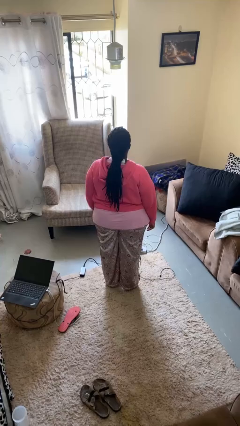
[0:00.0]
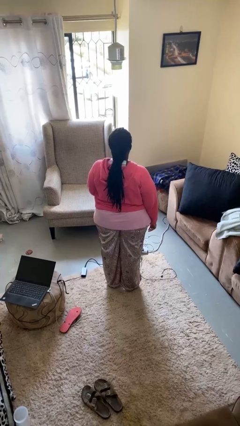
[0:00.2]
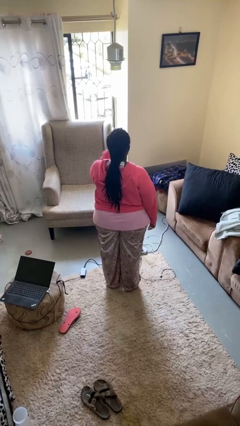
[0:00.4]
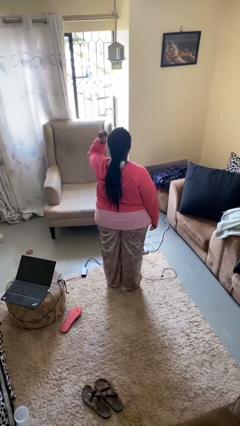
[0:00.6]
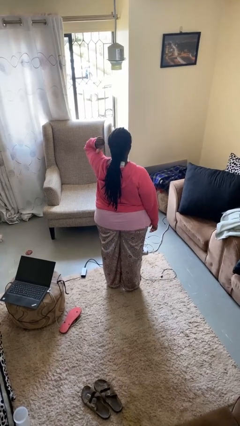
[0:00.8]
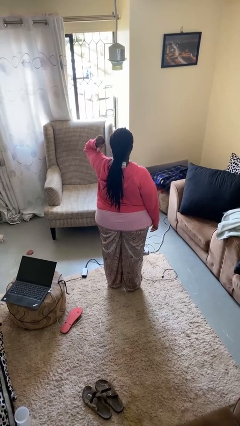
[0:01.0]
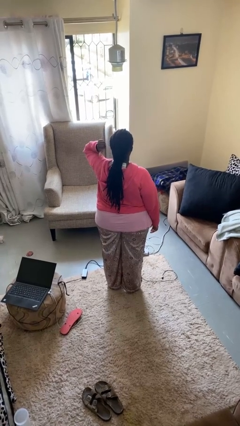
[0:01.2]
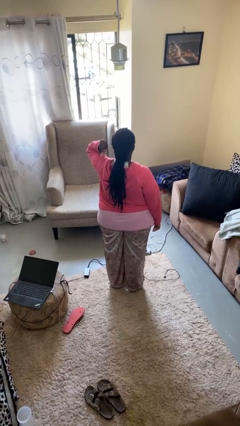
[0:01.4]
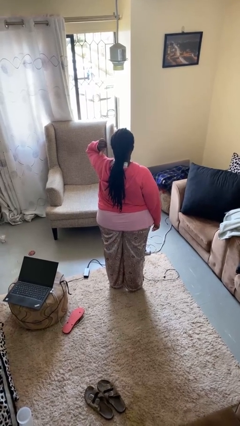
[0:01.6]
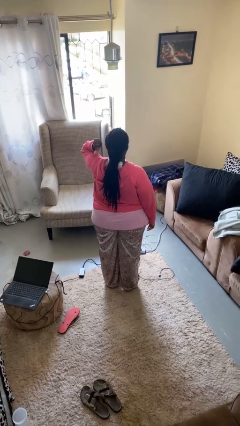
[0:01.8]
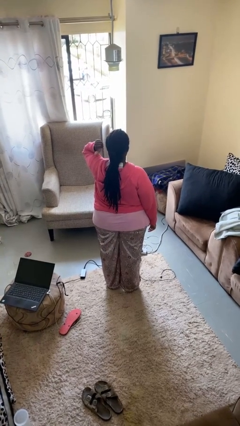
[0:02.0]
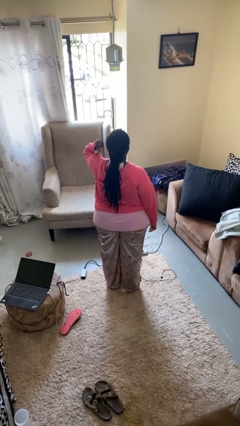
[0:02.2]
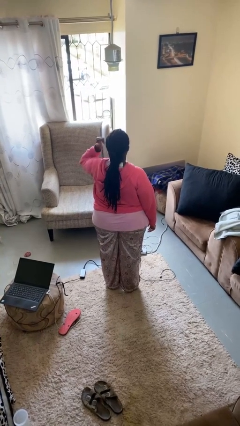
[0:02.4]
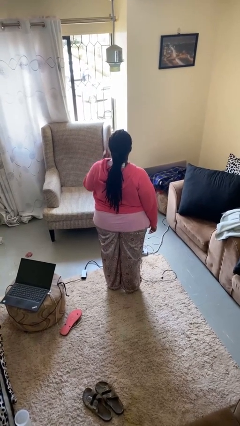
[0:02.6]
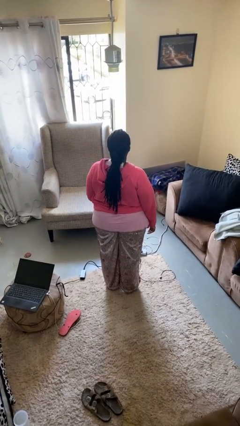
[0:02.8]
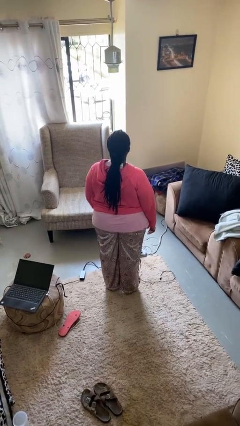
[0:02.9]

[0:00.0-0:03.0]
person gestures behind me

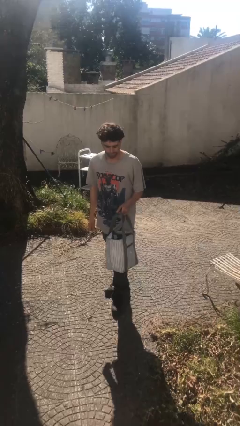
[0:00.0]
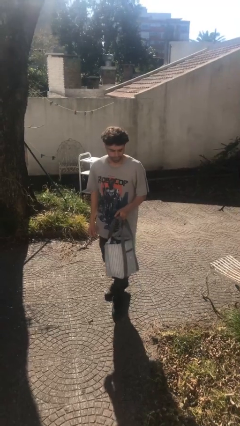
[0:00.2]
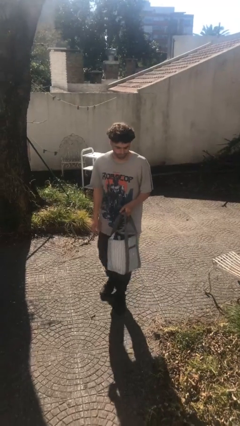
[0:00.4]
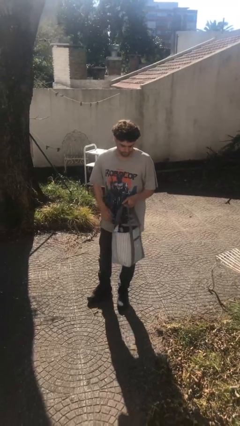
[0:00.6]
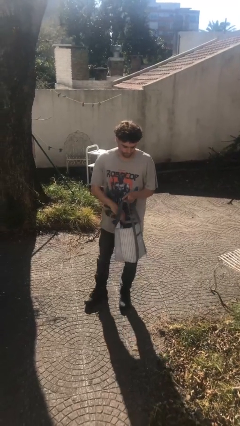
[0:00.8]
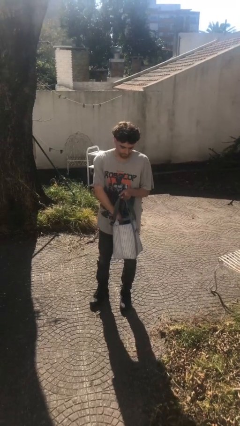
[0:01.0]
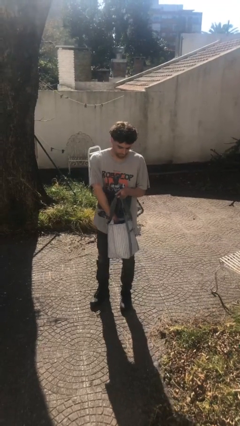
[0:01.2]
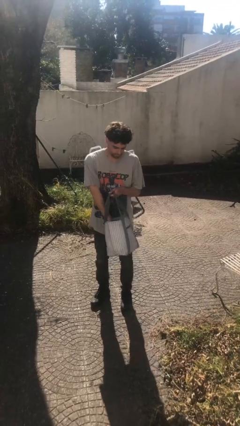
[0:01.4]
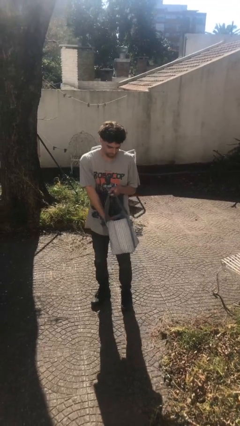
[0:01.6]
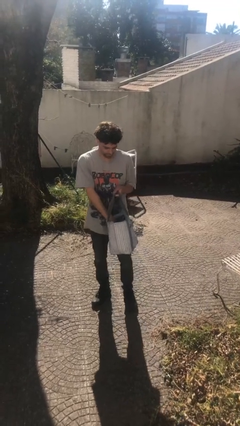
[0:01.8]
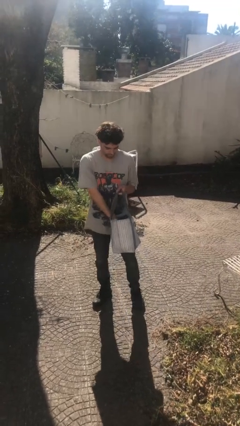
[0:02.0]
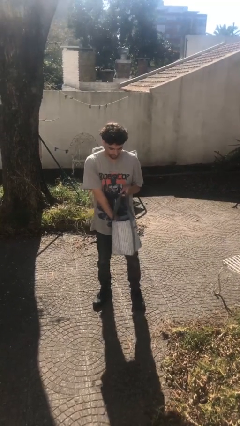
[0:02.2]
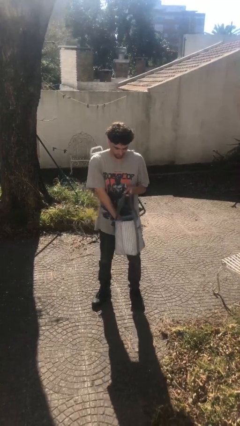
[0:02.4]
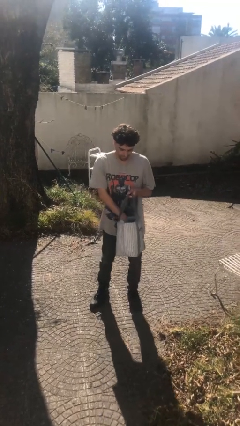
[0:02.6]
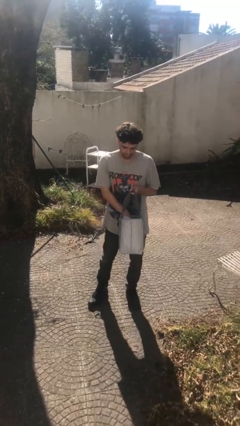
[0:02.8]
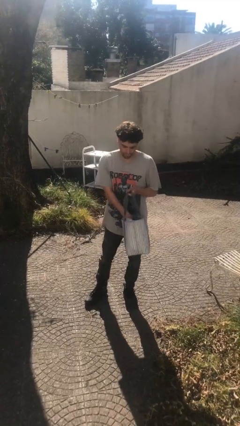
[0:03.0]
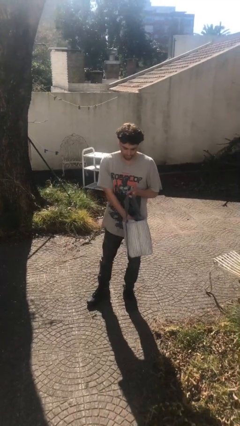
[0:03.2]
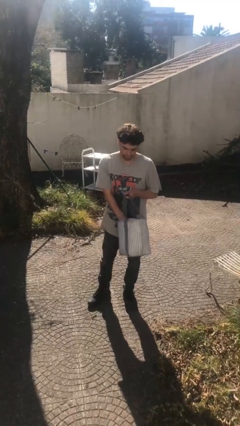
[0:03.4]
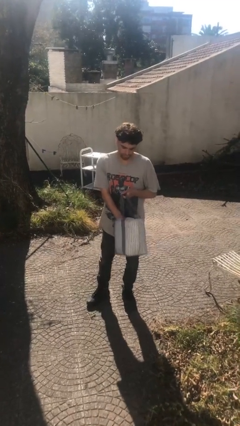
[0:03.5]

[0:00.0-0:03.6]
person searches in purse

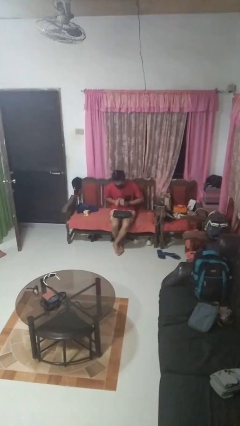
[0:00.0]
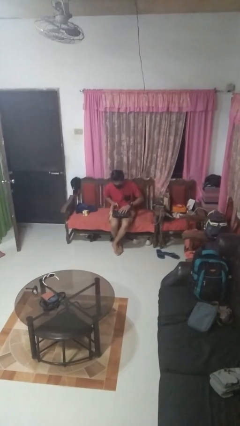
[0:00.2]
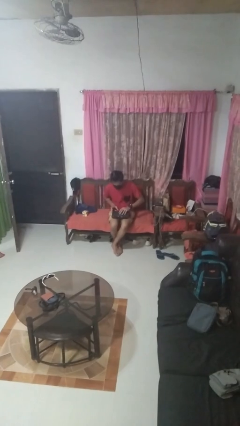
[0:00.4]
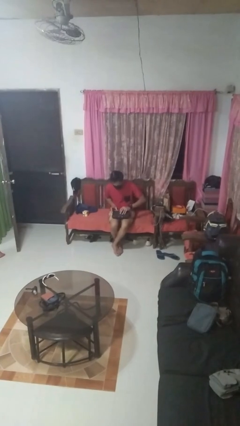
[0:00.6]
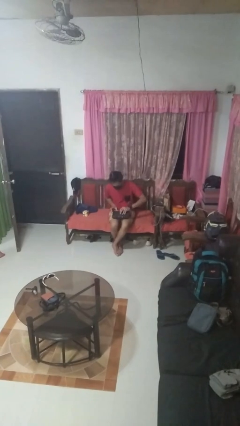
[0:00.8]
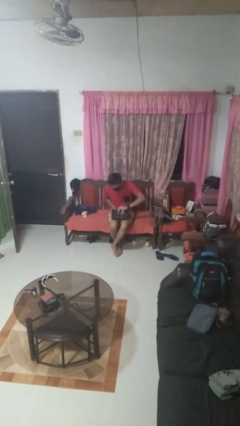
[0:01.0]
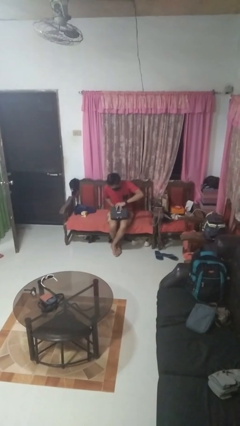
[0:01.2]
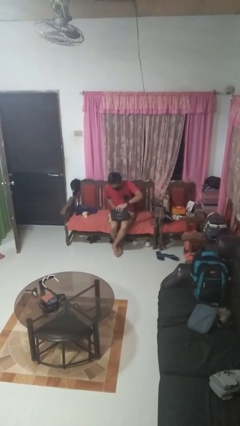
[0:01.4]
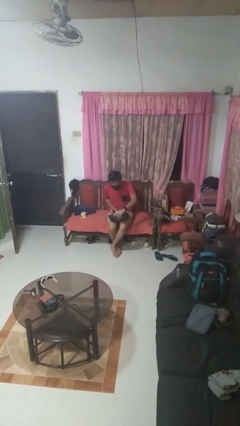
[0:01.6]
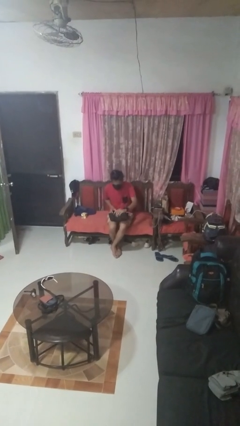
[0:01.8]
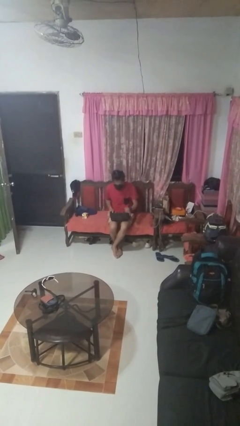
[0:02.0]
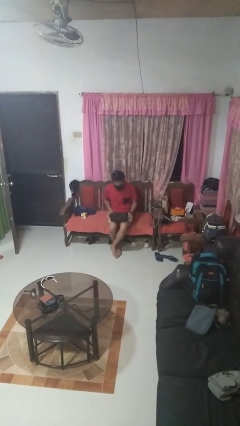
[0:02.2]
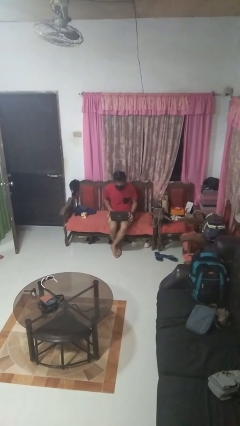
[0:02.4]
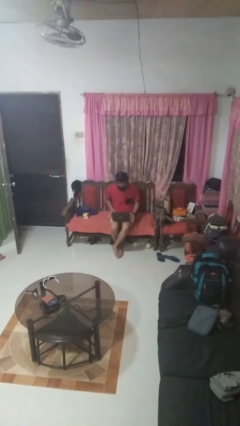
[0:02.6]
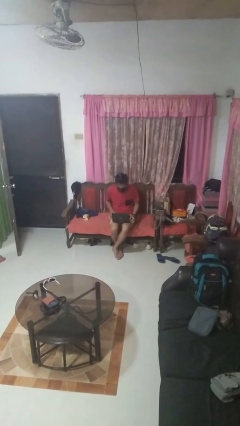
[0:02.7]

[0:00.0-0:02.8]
person opens laptop

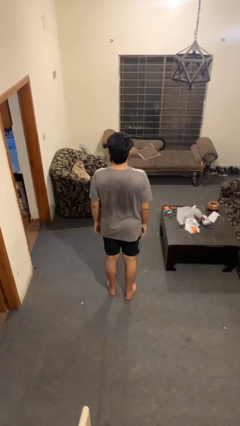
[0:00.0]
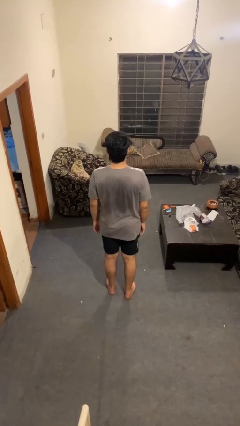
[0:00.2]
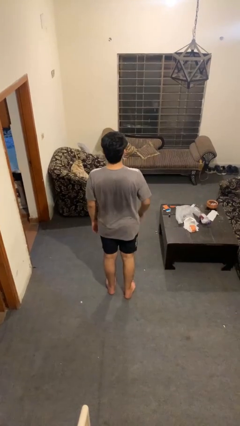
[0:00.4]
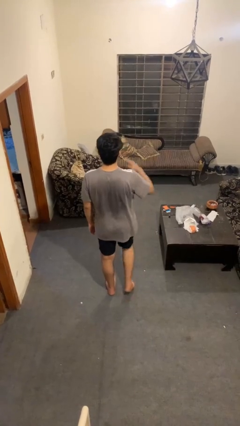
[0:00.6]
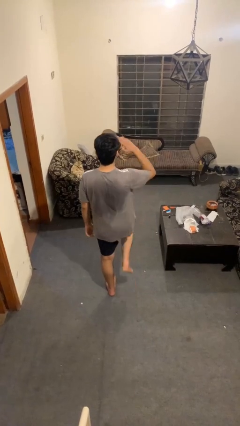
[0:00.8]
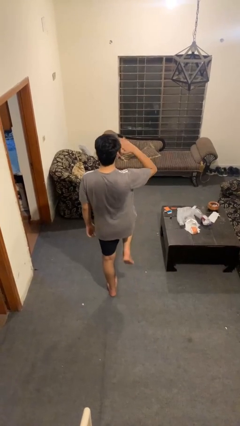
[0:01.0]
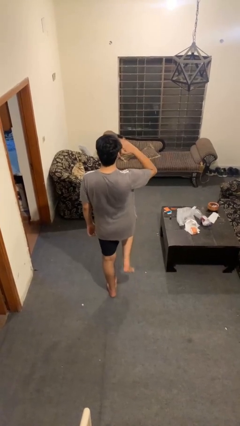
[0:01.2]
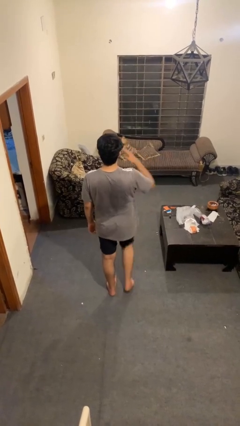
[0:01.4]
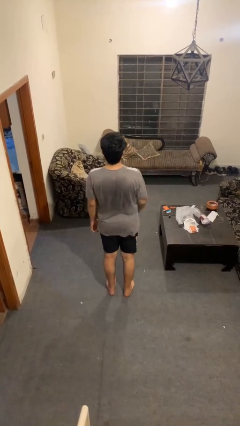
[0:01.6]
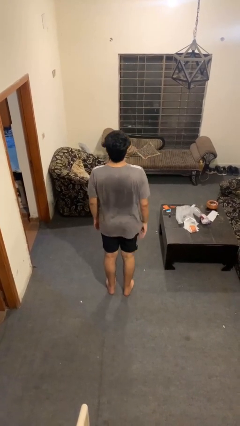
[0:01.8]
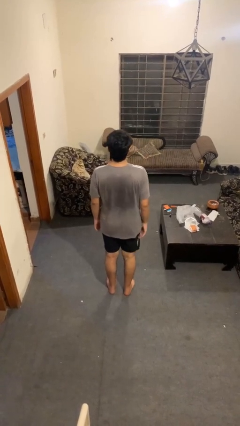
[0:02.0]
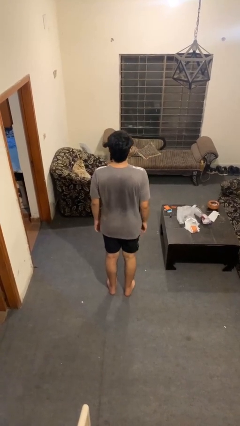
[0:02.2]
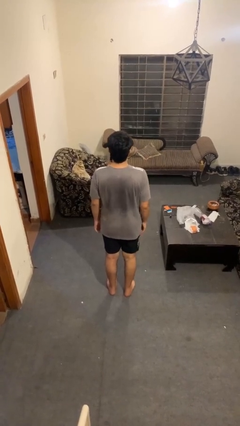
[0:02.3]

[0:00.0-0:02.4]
person salutes

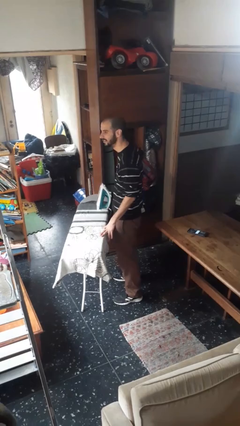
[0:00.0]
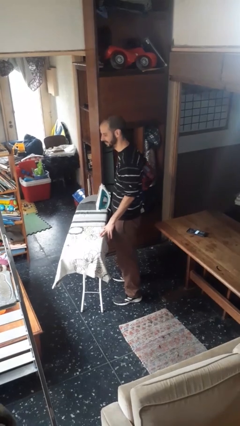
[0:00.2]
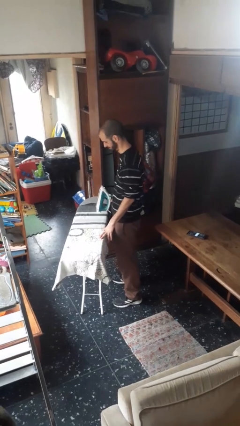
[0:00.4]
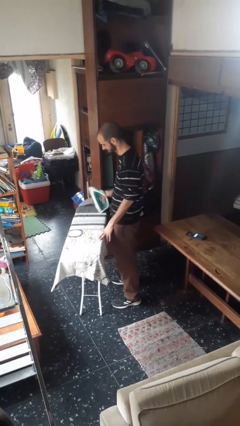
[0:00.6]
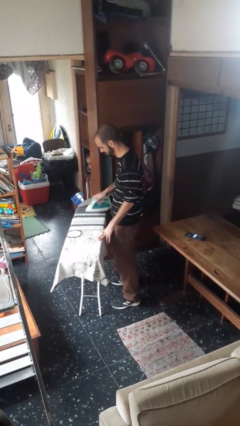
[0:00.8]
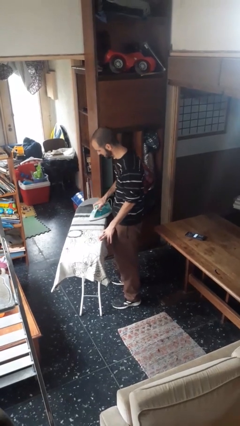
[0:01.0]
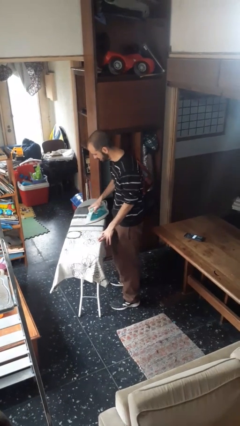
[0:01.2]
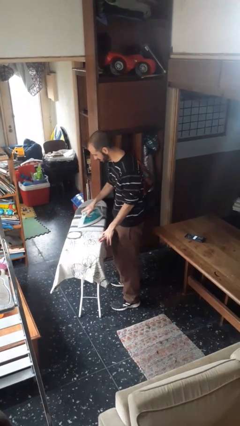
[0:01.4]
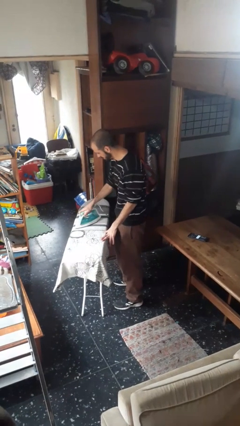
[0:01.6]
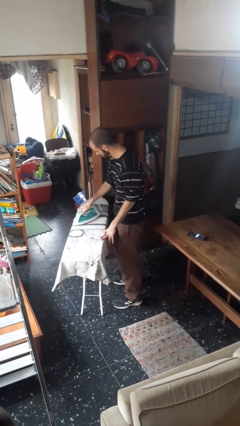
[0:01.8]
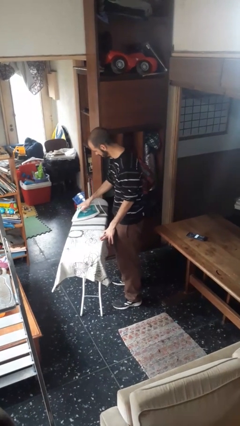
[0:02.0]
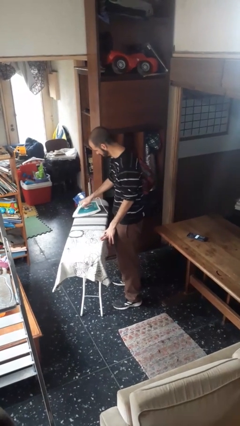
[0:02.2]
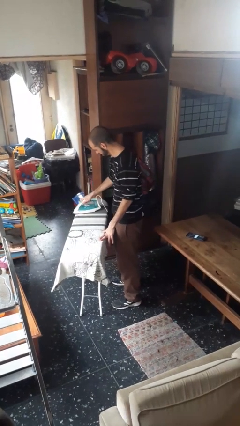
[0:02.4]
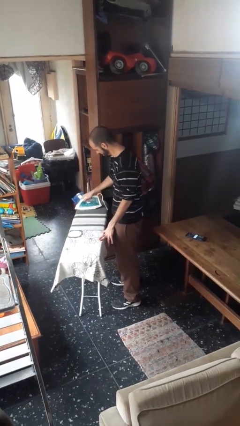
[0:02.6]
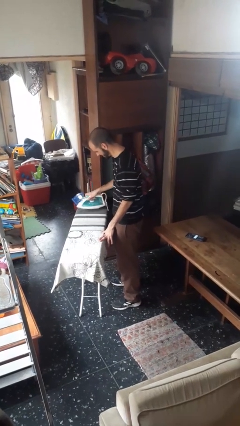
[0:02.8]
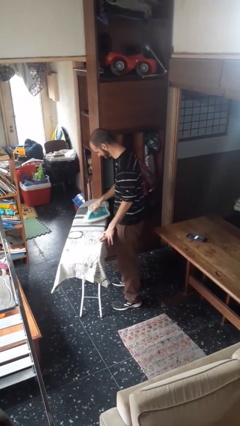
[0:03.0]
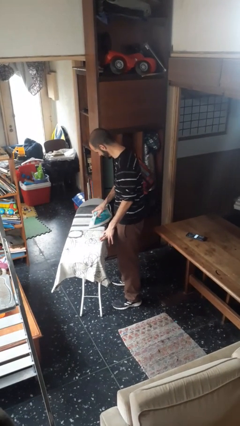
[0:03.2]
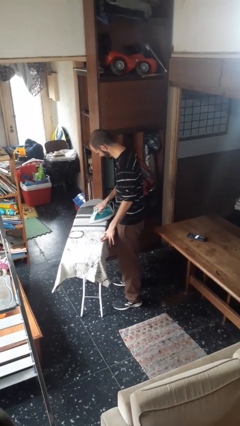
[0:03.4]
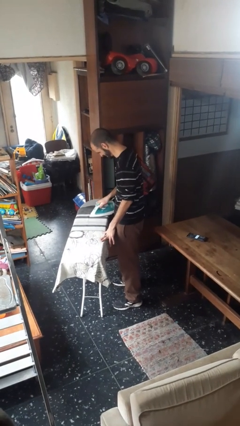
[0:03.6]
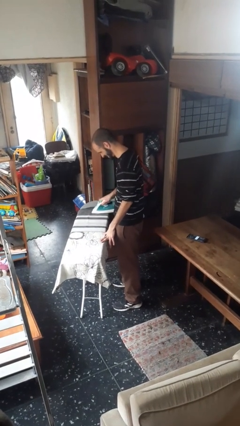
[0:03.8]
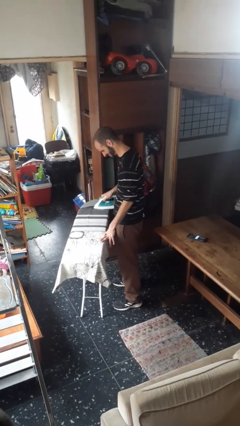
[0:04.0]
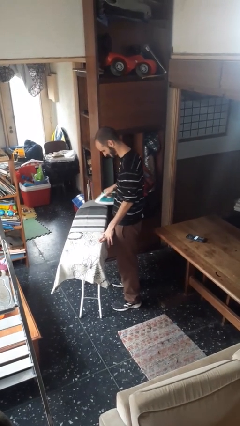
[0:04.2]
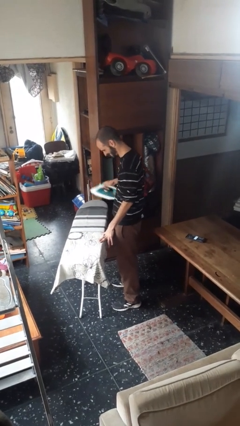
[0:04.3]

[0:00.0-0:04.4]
person irons clothes

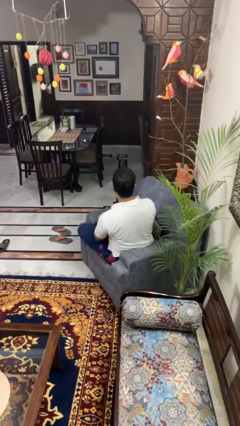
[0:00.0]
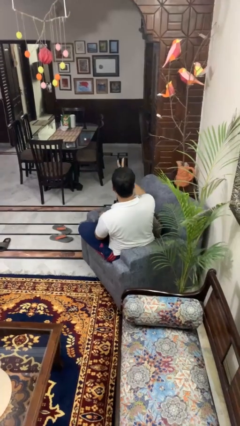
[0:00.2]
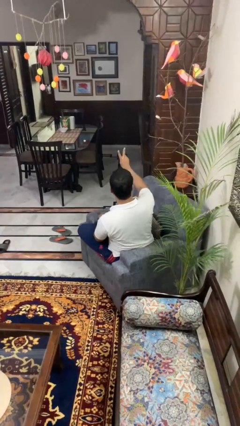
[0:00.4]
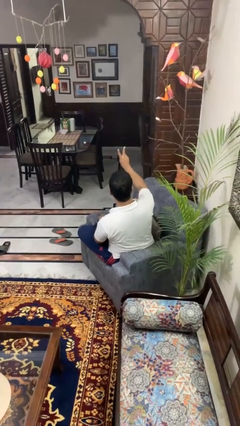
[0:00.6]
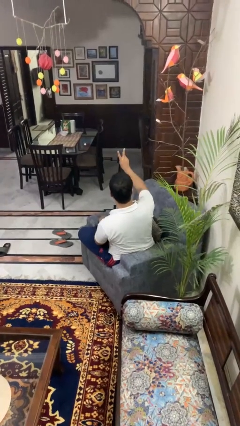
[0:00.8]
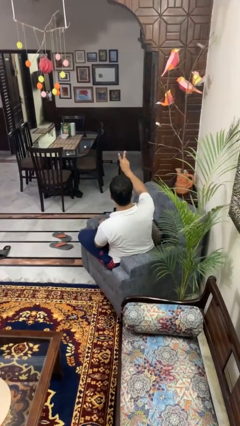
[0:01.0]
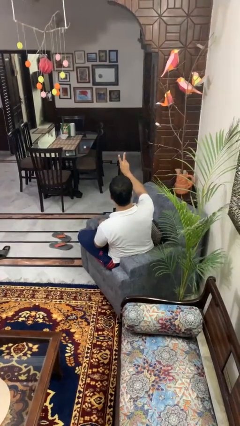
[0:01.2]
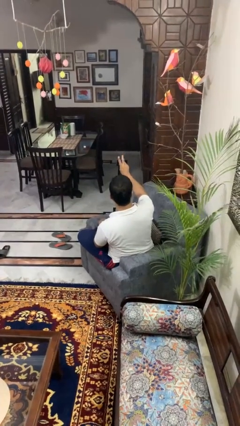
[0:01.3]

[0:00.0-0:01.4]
person gestures peace

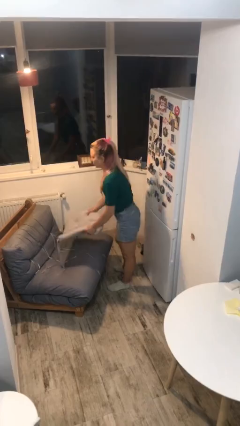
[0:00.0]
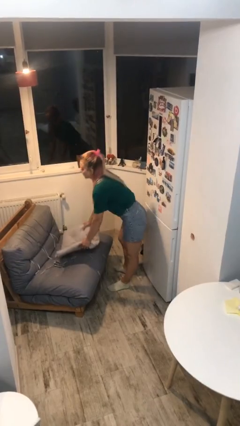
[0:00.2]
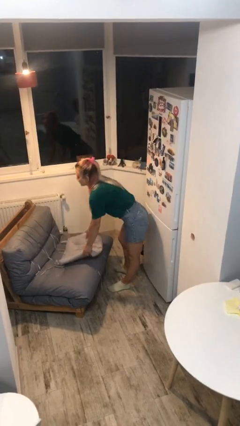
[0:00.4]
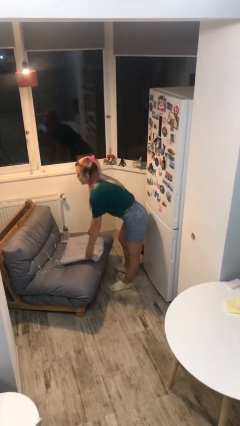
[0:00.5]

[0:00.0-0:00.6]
person puts down object on couch
